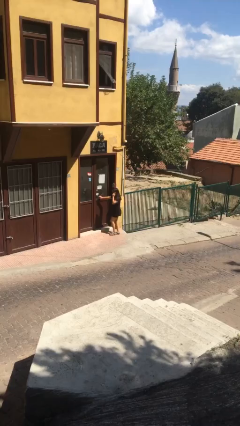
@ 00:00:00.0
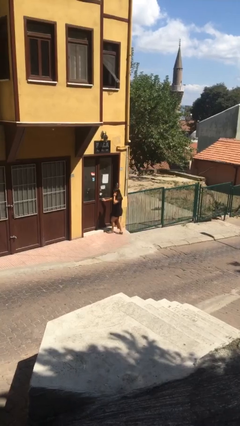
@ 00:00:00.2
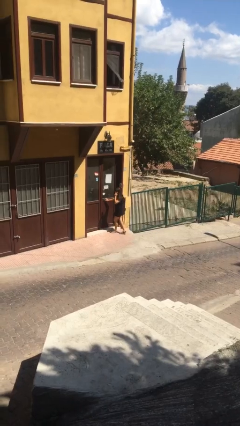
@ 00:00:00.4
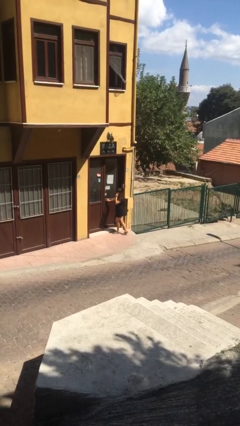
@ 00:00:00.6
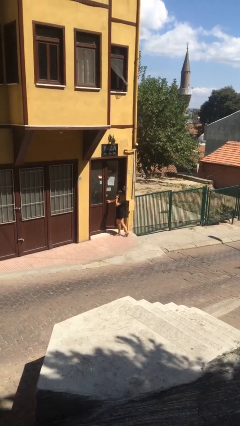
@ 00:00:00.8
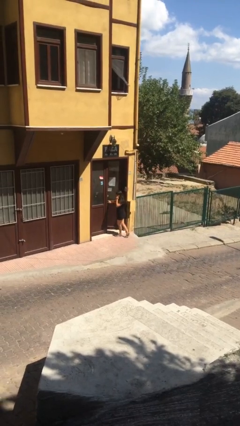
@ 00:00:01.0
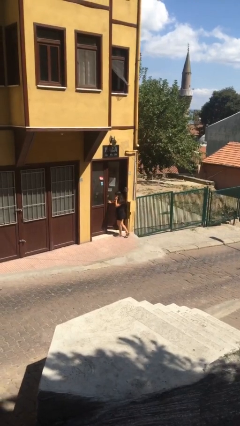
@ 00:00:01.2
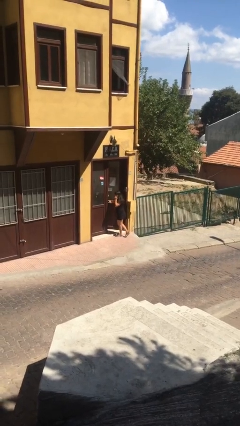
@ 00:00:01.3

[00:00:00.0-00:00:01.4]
person opens facility door

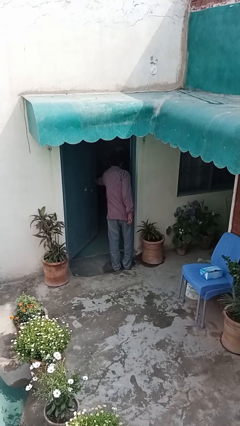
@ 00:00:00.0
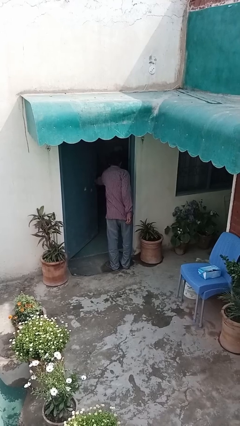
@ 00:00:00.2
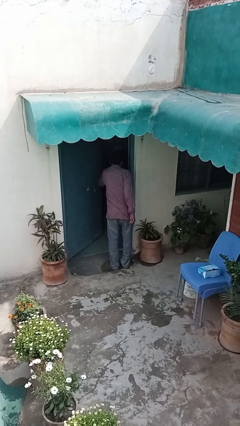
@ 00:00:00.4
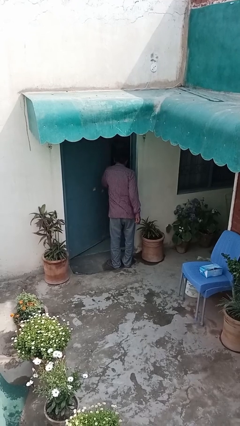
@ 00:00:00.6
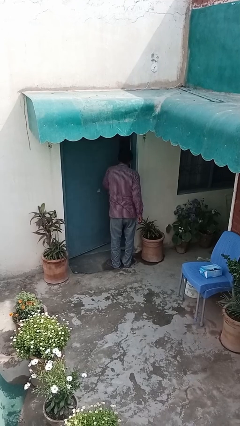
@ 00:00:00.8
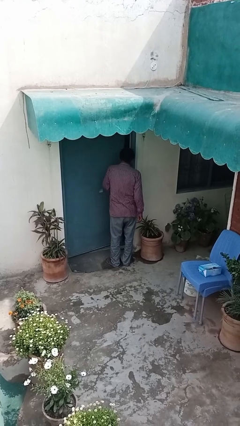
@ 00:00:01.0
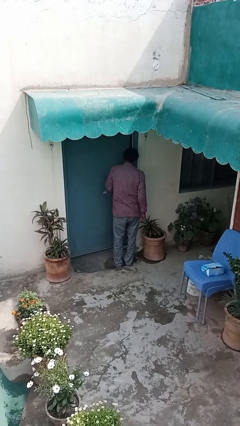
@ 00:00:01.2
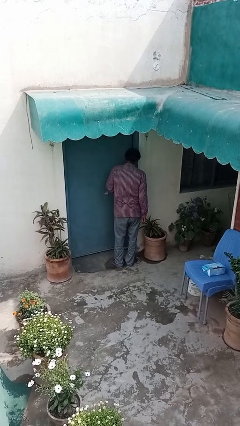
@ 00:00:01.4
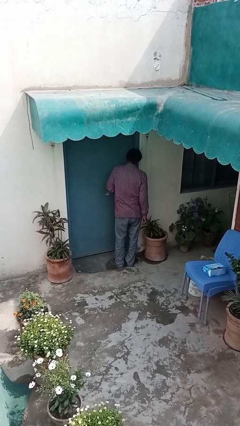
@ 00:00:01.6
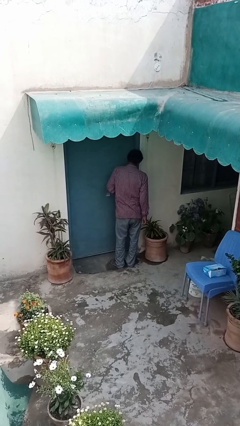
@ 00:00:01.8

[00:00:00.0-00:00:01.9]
person closes facility door

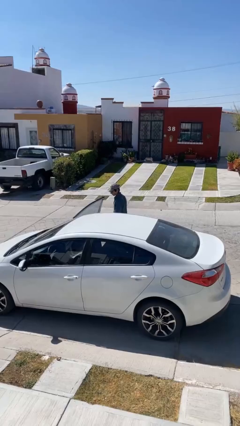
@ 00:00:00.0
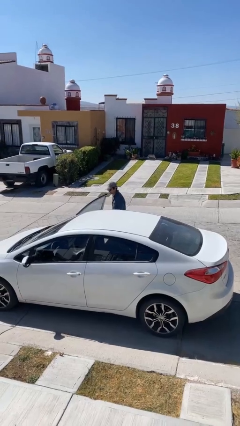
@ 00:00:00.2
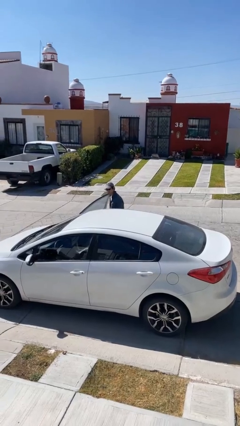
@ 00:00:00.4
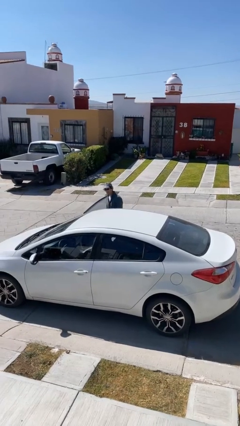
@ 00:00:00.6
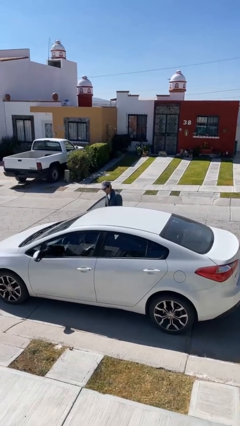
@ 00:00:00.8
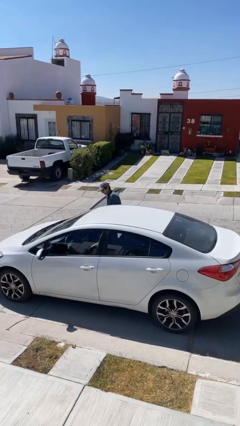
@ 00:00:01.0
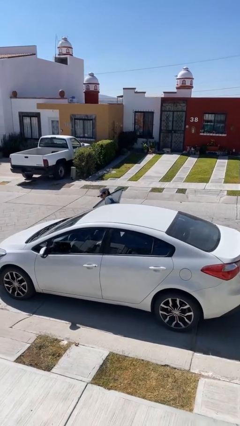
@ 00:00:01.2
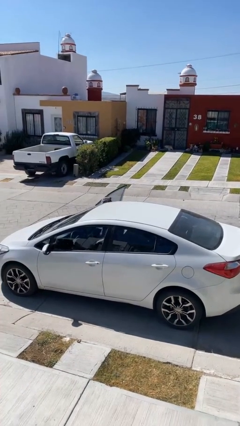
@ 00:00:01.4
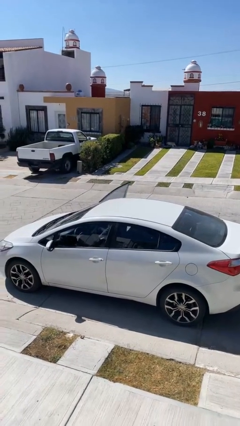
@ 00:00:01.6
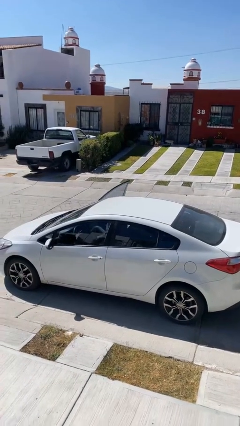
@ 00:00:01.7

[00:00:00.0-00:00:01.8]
person enters car

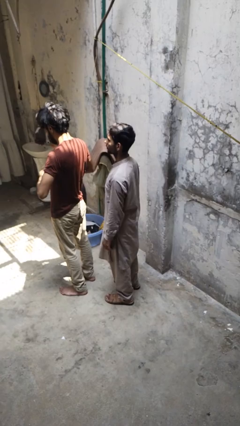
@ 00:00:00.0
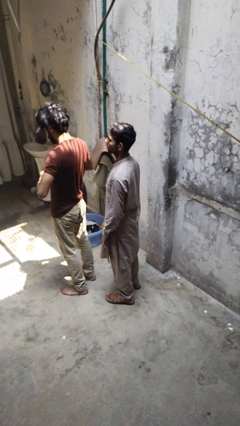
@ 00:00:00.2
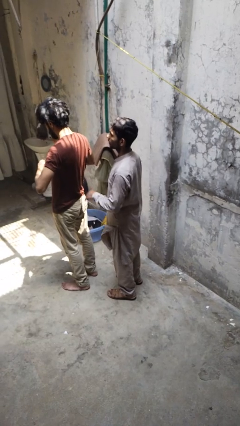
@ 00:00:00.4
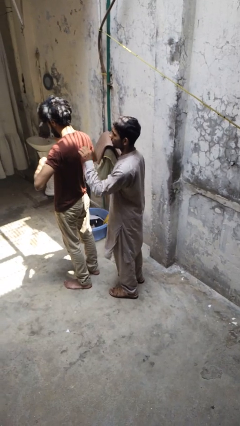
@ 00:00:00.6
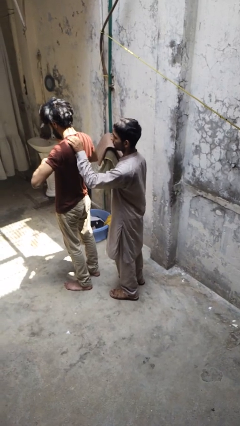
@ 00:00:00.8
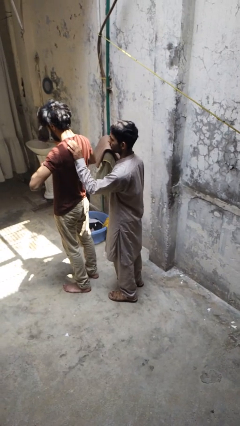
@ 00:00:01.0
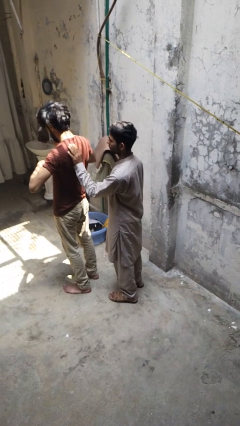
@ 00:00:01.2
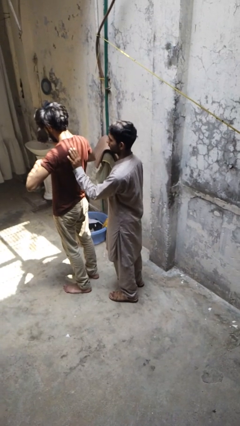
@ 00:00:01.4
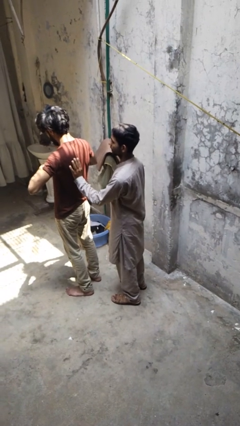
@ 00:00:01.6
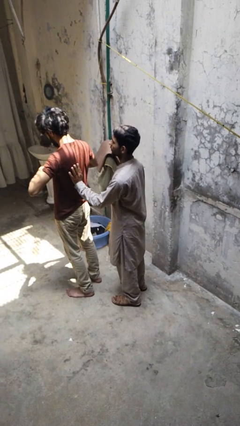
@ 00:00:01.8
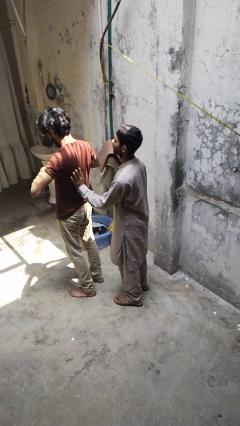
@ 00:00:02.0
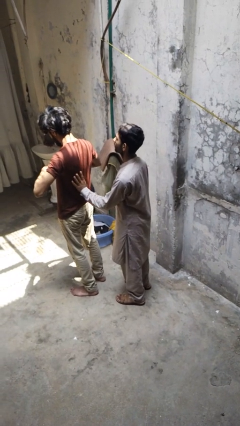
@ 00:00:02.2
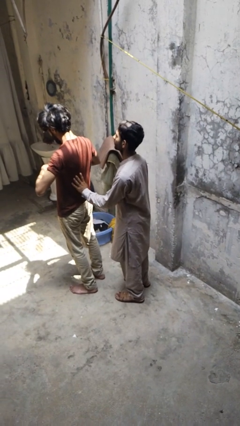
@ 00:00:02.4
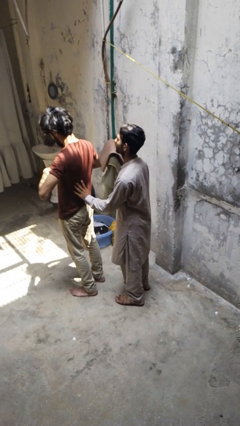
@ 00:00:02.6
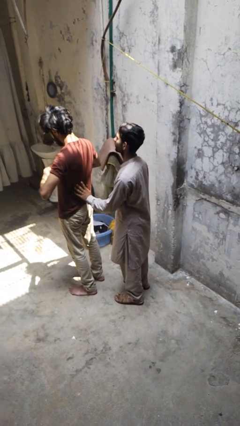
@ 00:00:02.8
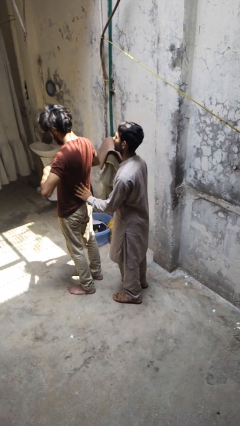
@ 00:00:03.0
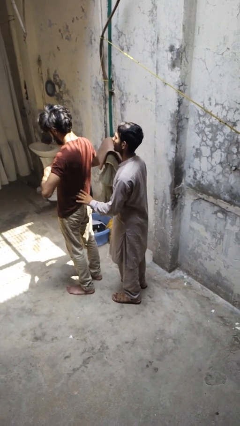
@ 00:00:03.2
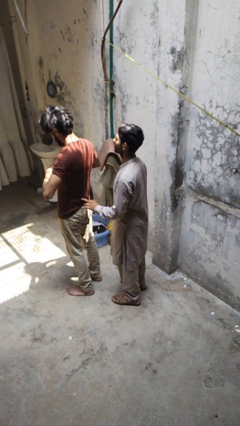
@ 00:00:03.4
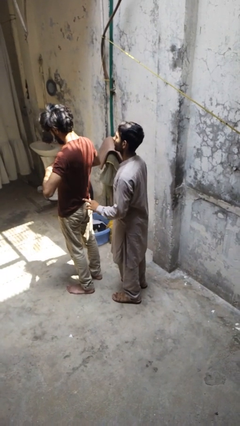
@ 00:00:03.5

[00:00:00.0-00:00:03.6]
person touches back of person

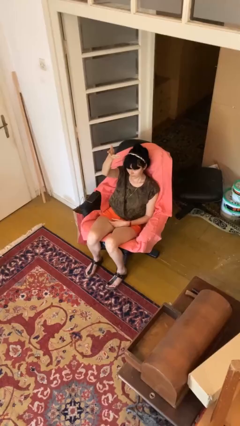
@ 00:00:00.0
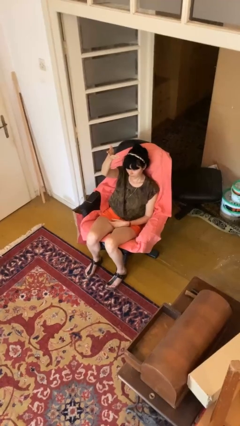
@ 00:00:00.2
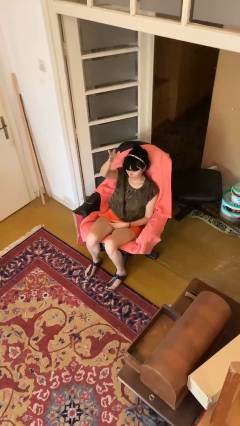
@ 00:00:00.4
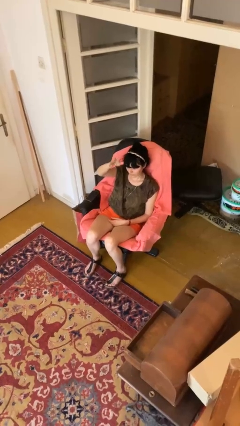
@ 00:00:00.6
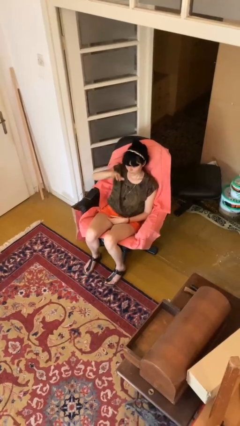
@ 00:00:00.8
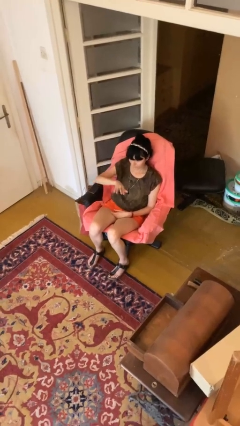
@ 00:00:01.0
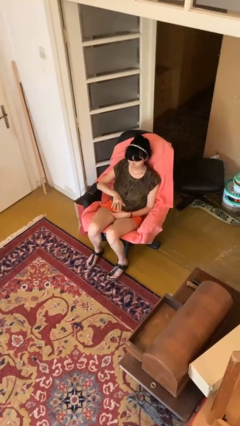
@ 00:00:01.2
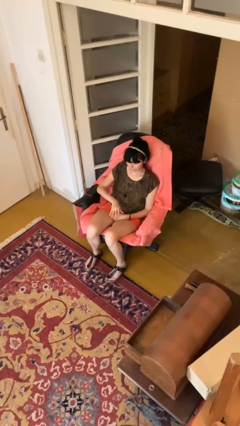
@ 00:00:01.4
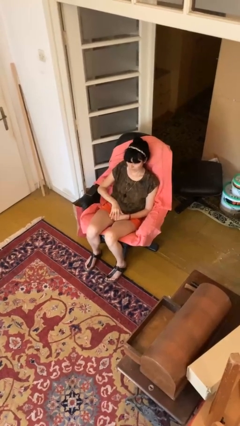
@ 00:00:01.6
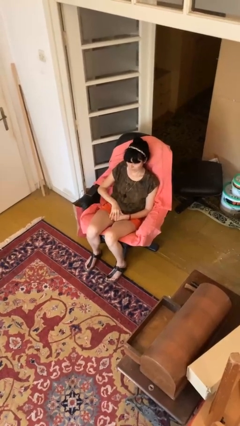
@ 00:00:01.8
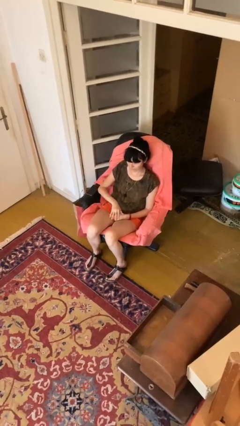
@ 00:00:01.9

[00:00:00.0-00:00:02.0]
person gestures swipe down

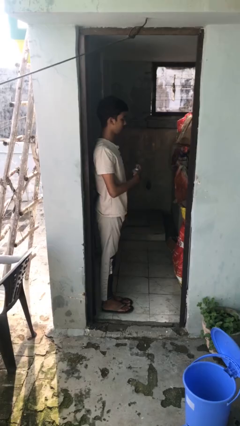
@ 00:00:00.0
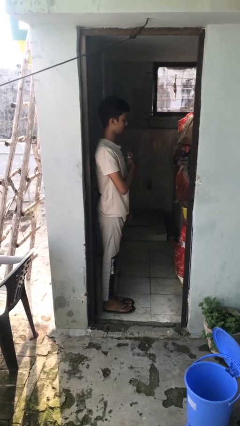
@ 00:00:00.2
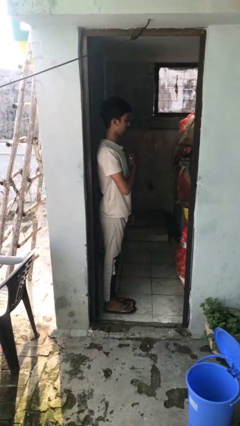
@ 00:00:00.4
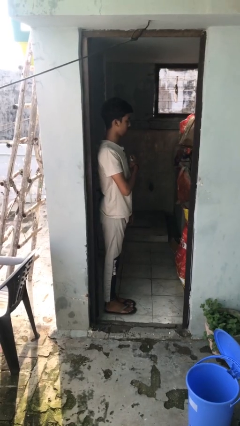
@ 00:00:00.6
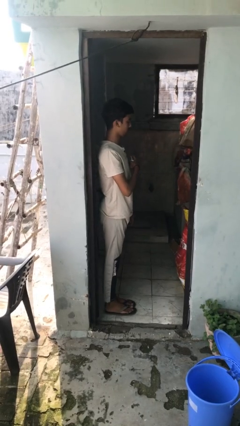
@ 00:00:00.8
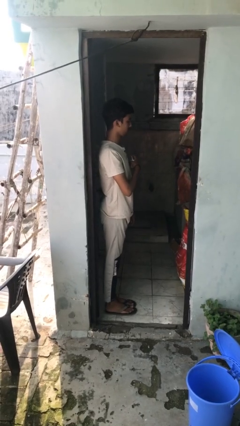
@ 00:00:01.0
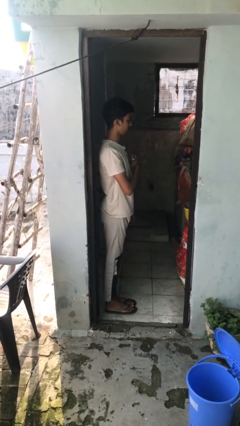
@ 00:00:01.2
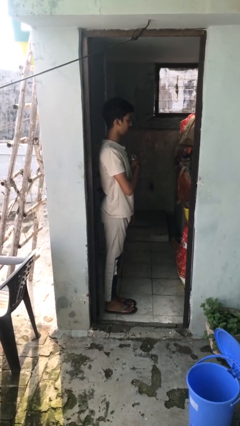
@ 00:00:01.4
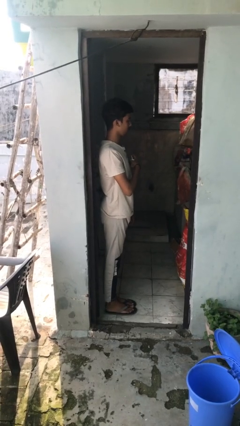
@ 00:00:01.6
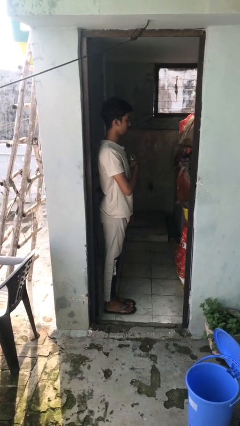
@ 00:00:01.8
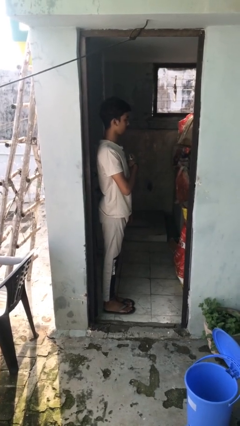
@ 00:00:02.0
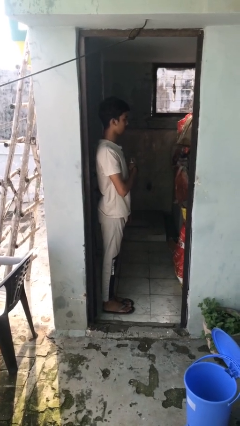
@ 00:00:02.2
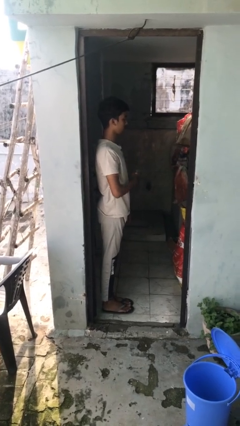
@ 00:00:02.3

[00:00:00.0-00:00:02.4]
person applies deodorant

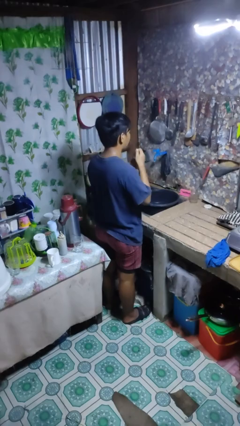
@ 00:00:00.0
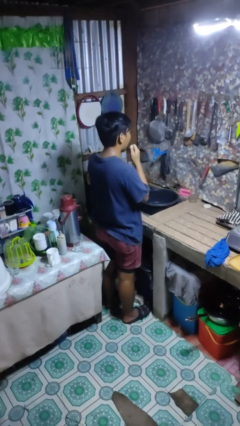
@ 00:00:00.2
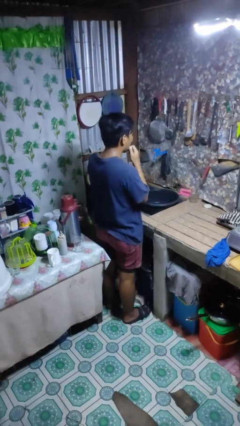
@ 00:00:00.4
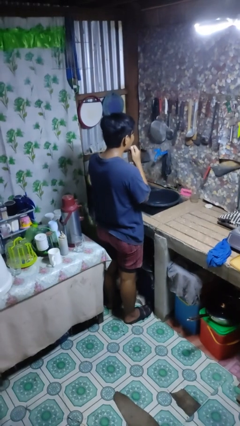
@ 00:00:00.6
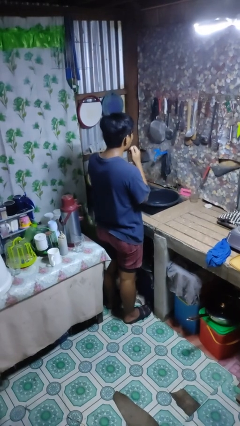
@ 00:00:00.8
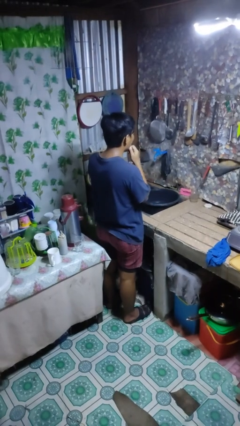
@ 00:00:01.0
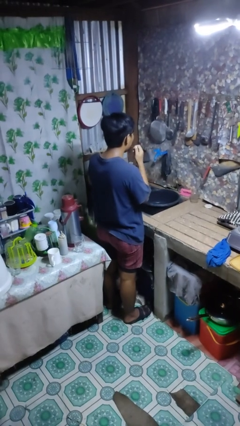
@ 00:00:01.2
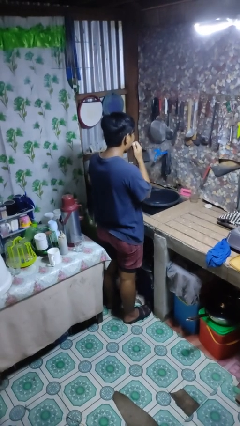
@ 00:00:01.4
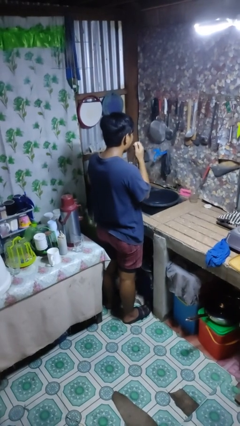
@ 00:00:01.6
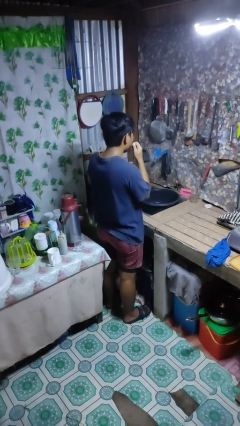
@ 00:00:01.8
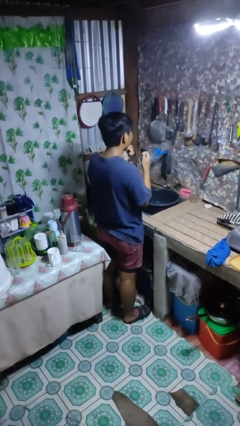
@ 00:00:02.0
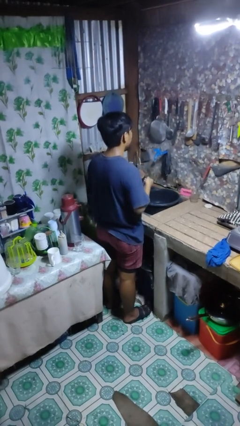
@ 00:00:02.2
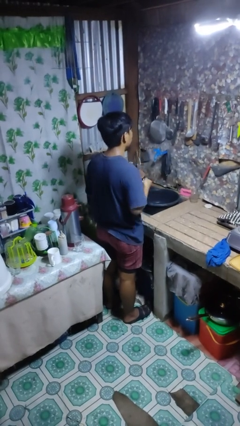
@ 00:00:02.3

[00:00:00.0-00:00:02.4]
person flosses

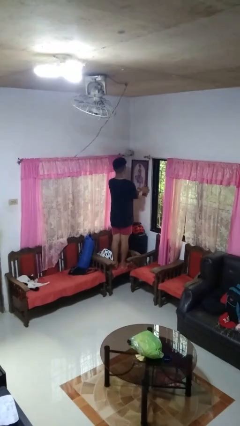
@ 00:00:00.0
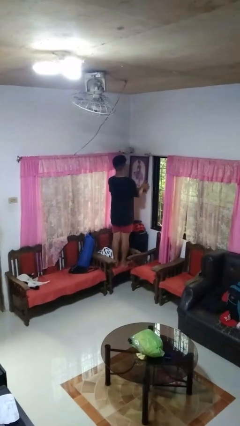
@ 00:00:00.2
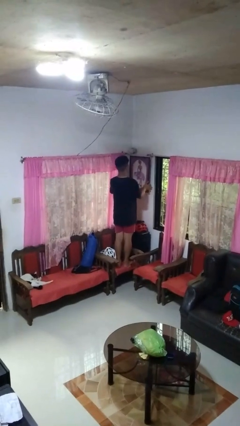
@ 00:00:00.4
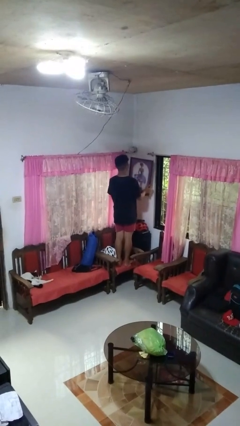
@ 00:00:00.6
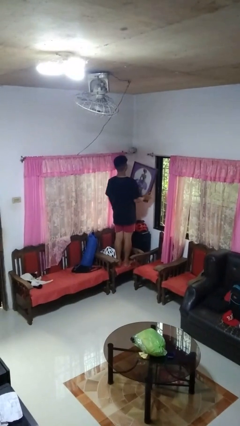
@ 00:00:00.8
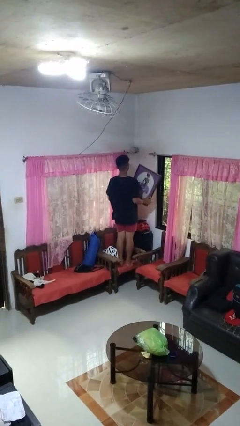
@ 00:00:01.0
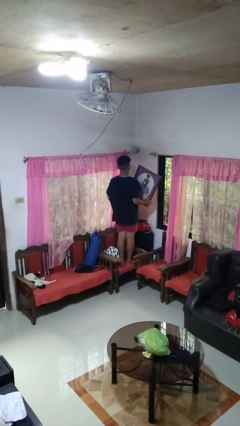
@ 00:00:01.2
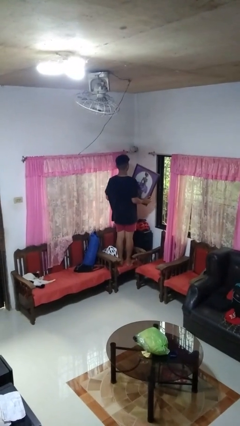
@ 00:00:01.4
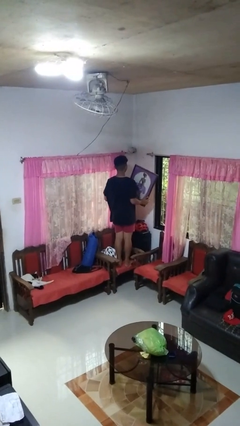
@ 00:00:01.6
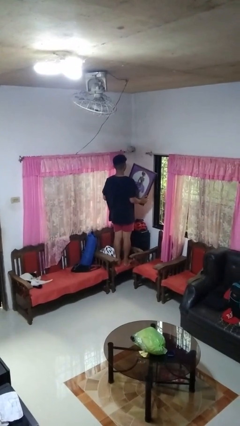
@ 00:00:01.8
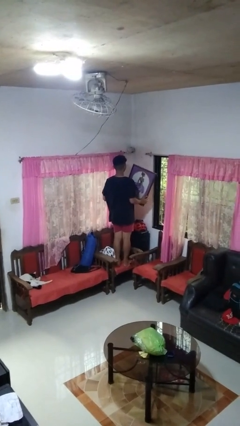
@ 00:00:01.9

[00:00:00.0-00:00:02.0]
person takes down picture frame
